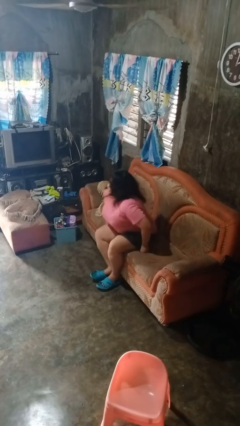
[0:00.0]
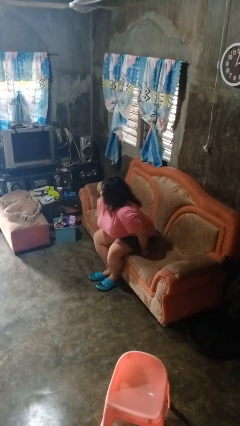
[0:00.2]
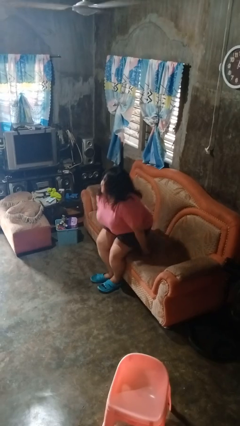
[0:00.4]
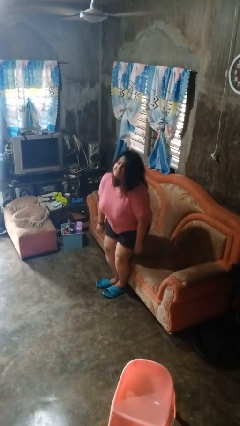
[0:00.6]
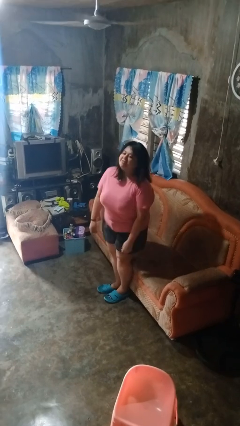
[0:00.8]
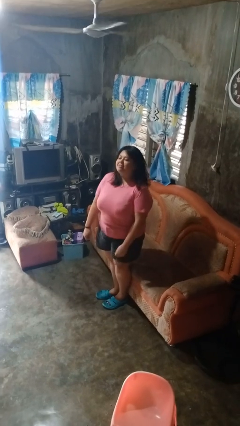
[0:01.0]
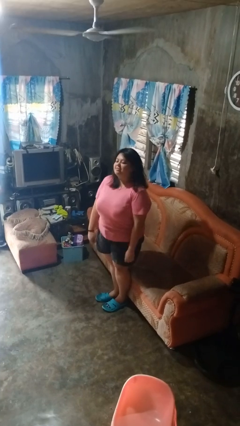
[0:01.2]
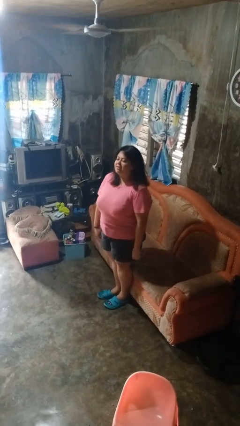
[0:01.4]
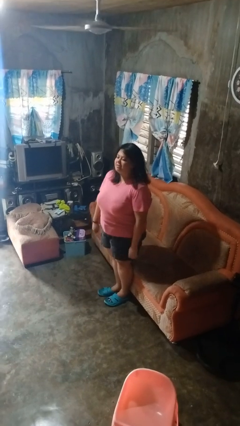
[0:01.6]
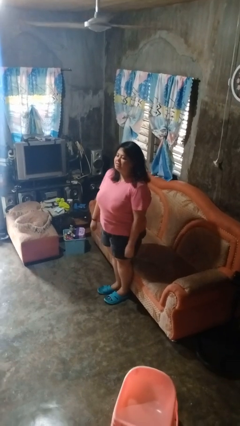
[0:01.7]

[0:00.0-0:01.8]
person stands up

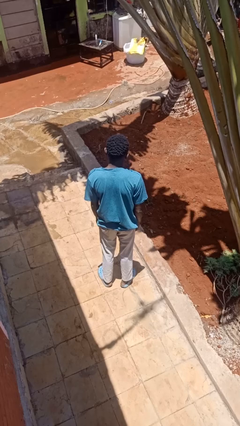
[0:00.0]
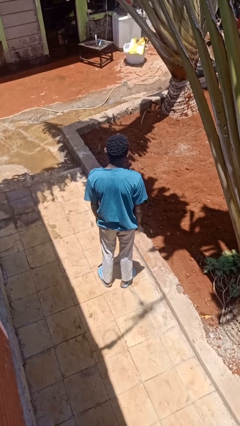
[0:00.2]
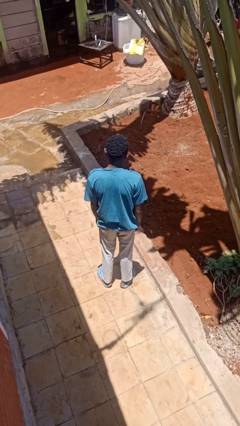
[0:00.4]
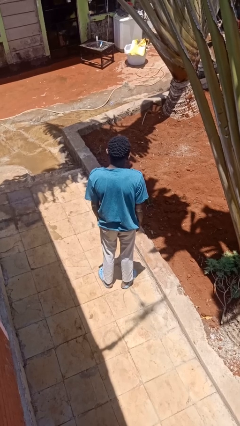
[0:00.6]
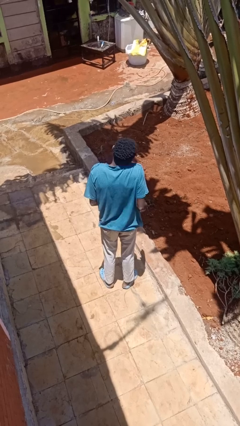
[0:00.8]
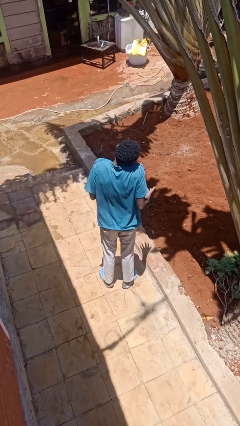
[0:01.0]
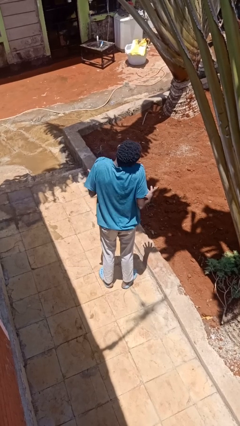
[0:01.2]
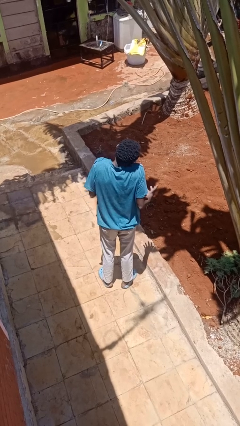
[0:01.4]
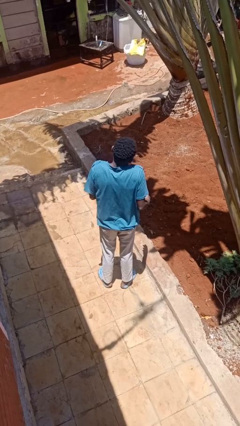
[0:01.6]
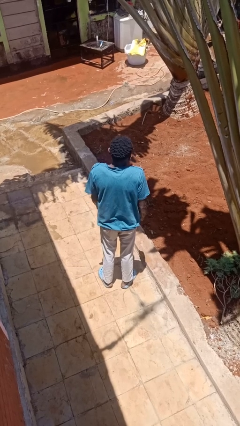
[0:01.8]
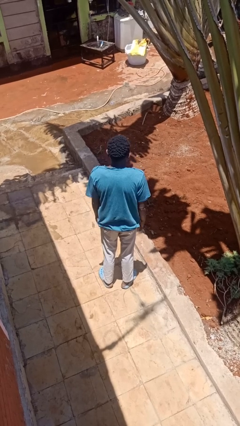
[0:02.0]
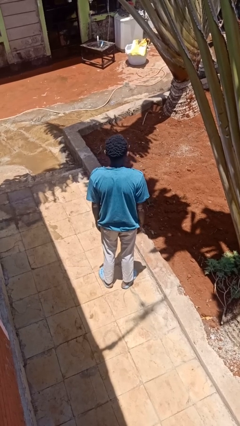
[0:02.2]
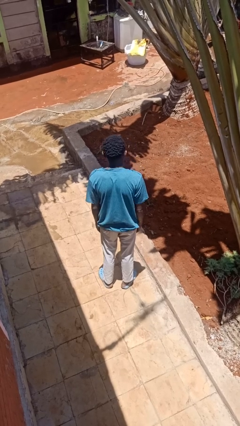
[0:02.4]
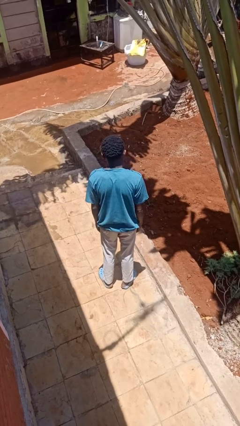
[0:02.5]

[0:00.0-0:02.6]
person shrugs

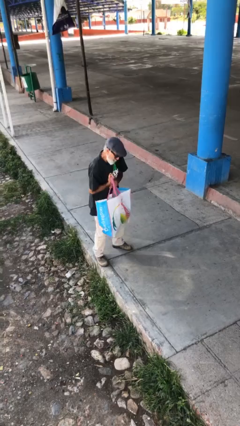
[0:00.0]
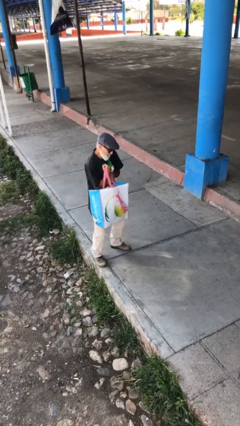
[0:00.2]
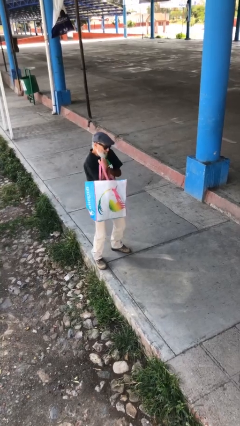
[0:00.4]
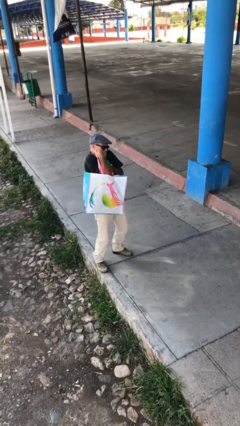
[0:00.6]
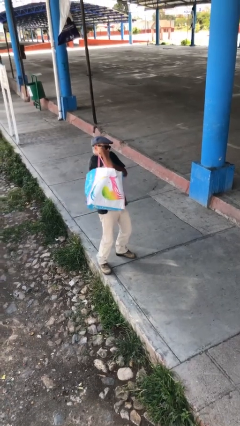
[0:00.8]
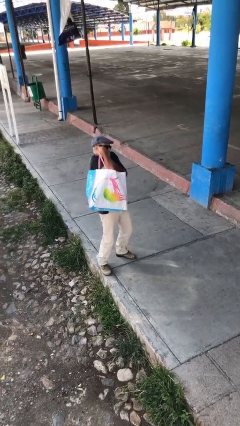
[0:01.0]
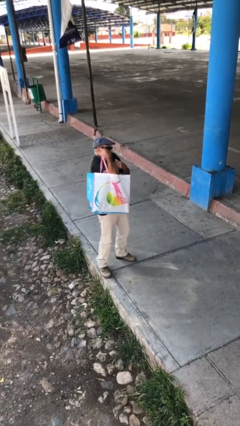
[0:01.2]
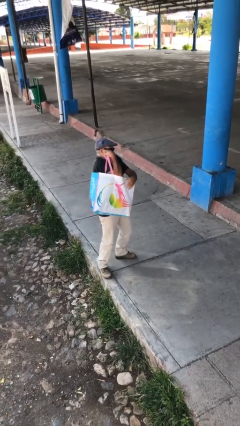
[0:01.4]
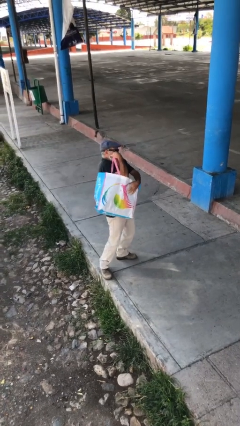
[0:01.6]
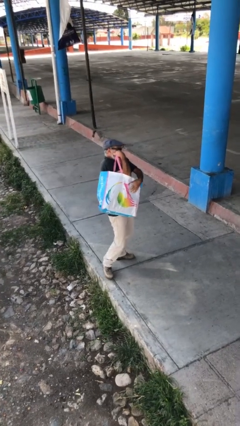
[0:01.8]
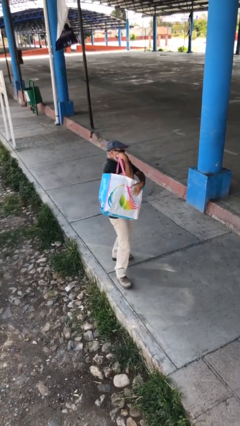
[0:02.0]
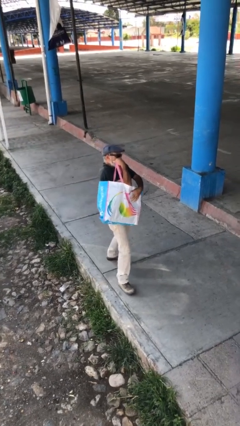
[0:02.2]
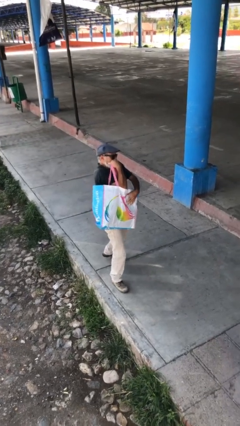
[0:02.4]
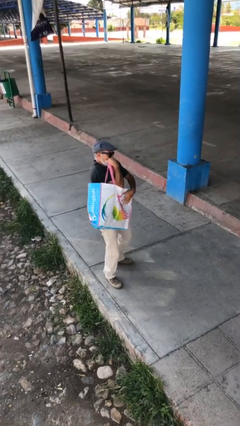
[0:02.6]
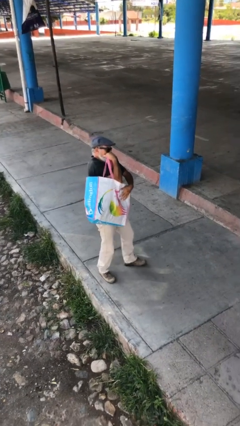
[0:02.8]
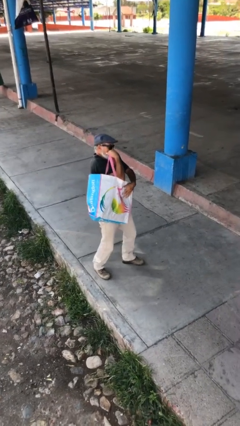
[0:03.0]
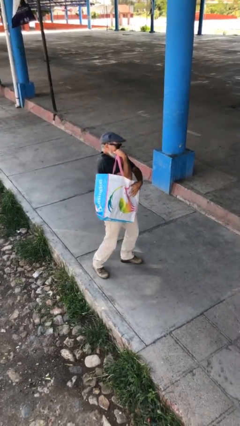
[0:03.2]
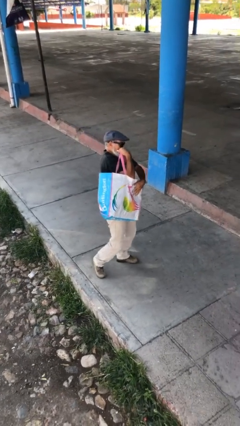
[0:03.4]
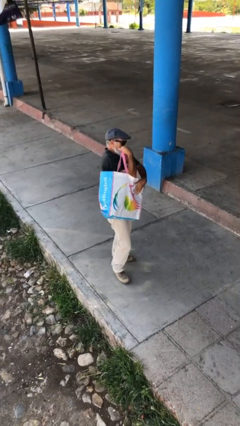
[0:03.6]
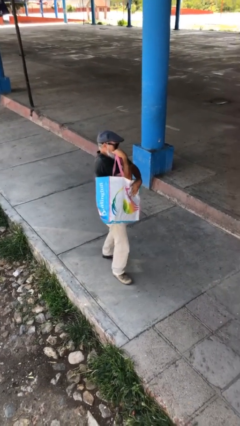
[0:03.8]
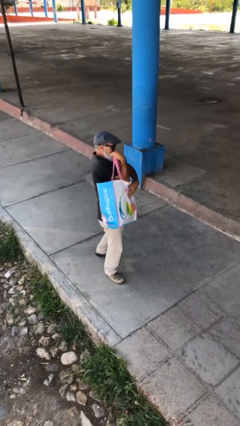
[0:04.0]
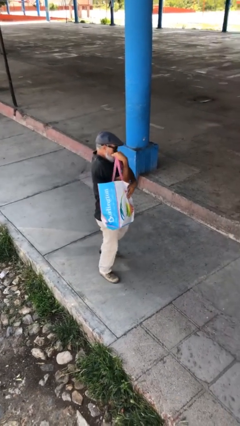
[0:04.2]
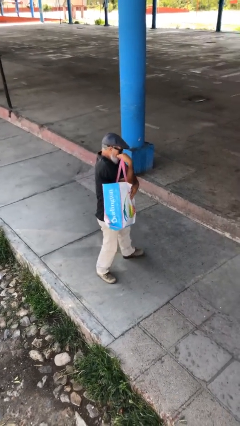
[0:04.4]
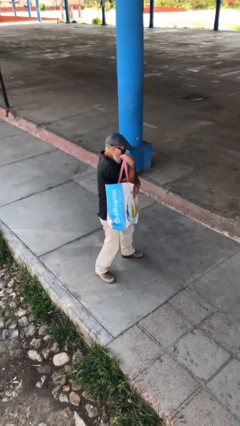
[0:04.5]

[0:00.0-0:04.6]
person carries heavy object

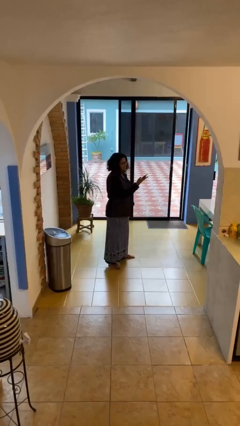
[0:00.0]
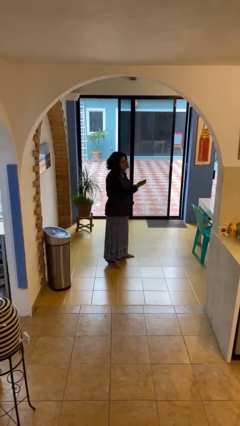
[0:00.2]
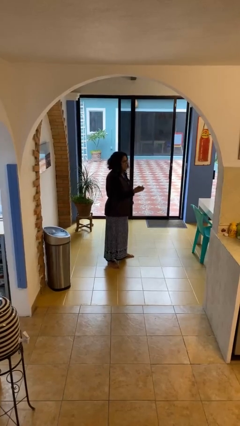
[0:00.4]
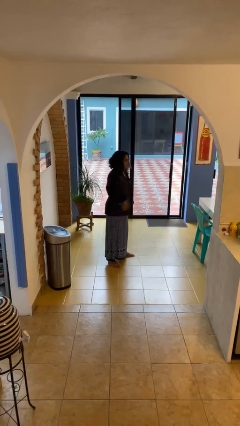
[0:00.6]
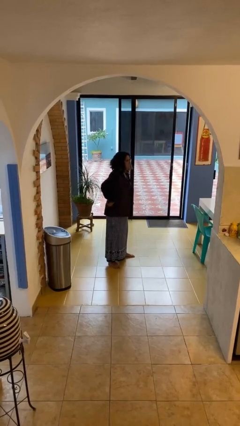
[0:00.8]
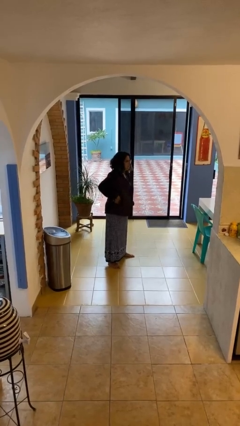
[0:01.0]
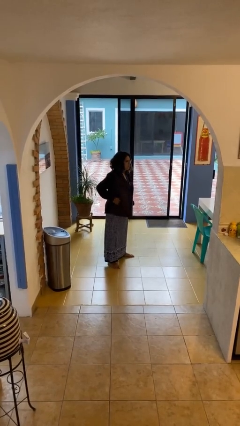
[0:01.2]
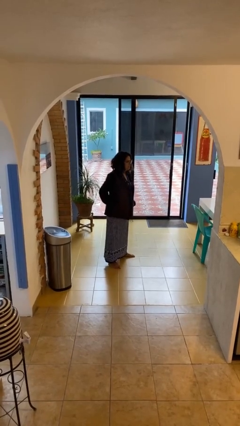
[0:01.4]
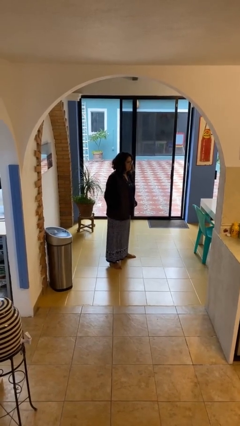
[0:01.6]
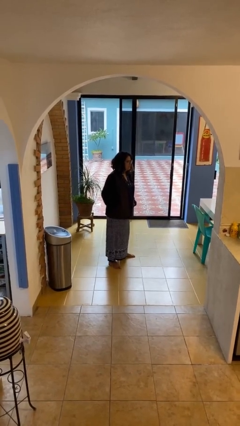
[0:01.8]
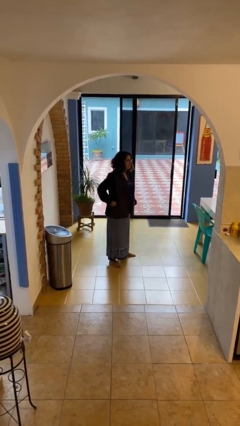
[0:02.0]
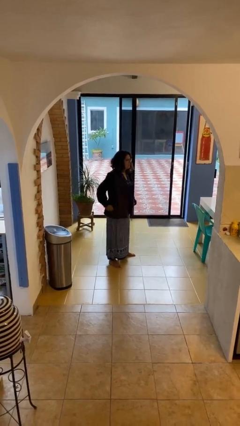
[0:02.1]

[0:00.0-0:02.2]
person puts phone into pocket

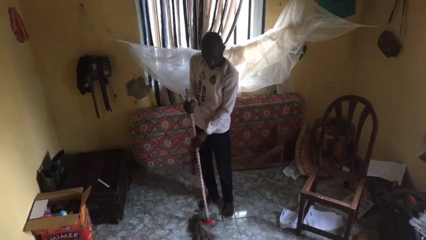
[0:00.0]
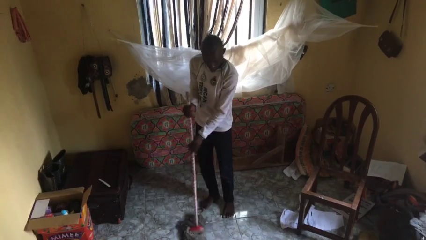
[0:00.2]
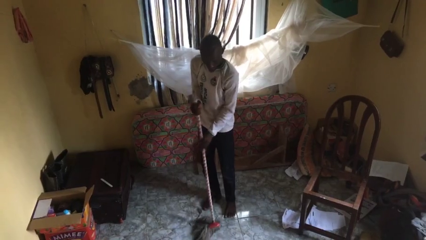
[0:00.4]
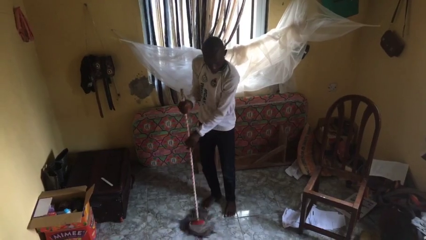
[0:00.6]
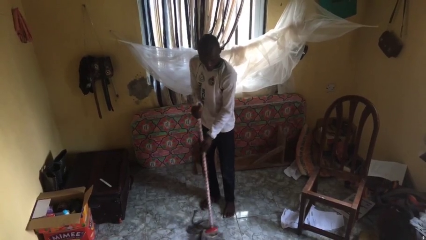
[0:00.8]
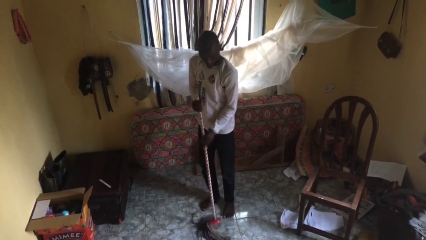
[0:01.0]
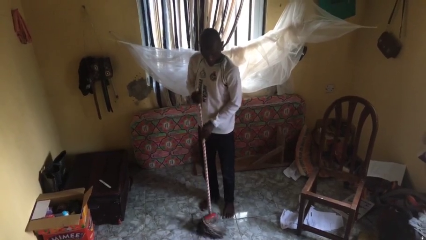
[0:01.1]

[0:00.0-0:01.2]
person mops

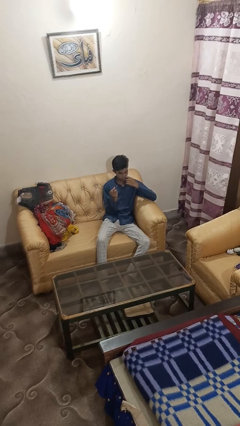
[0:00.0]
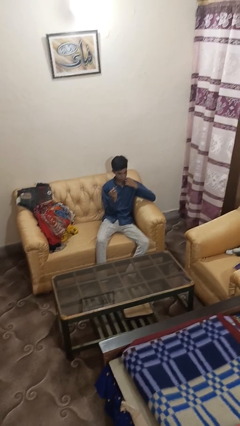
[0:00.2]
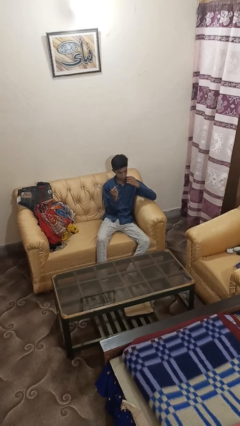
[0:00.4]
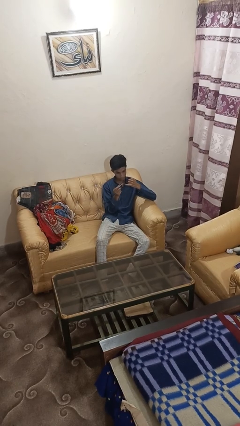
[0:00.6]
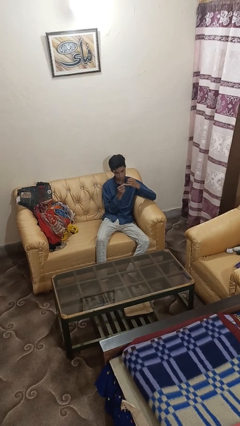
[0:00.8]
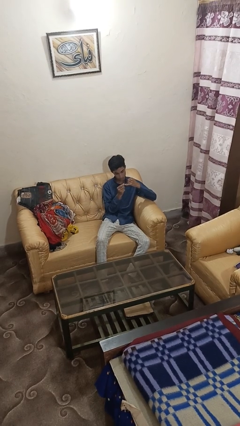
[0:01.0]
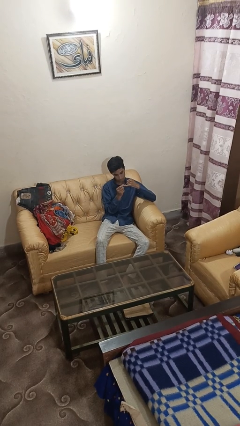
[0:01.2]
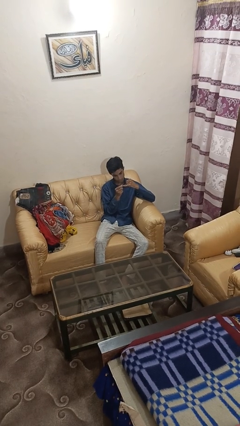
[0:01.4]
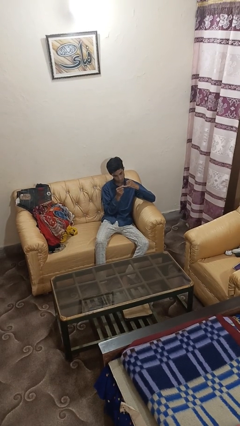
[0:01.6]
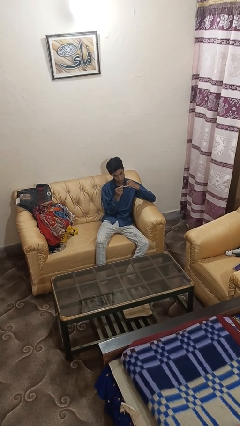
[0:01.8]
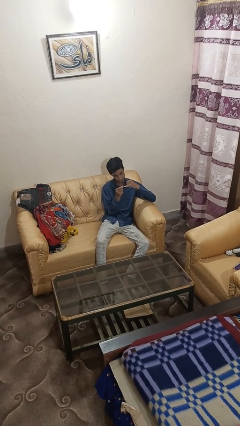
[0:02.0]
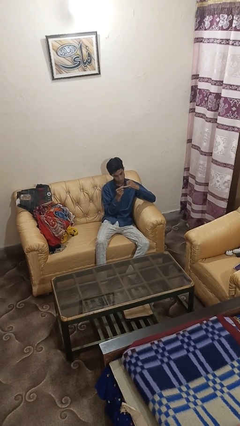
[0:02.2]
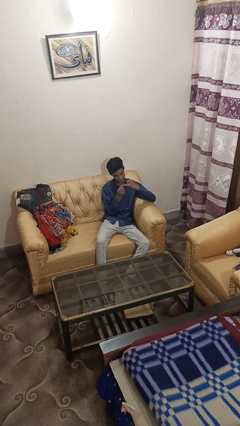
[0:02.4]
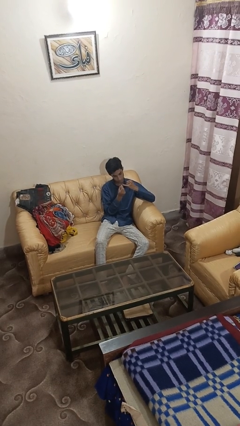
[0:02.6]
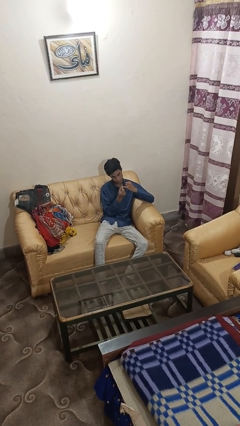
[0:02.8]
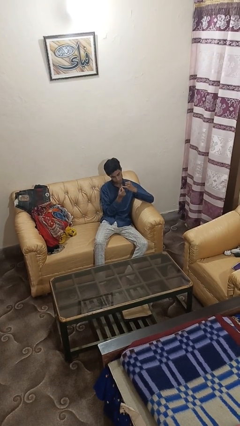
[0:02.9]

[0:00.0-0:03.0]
person files fingernails

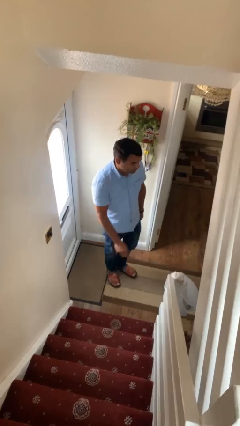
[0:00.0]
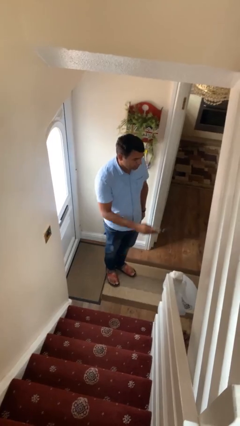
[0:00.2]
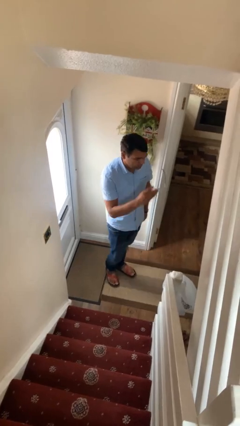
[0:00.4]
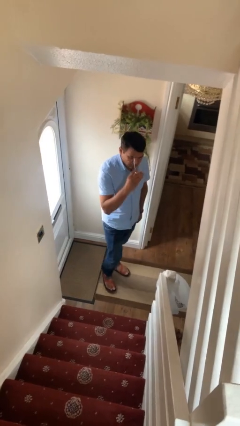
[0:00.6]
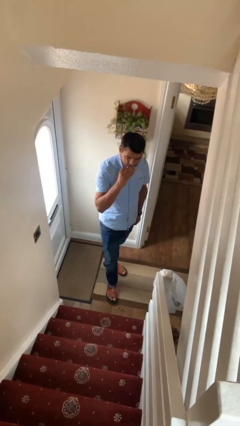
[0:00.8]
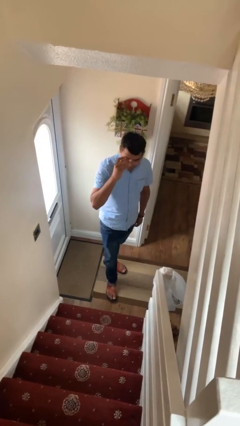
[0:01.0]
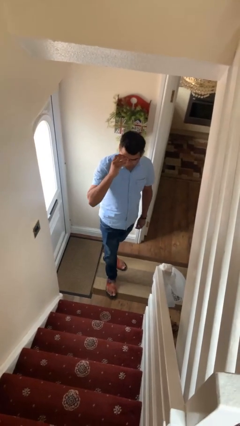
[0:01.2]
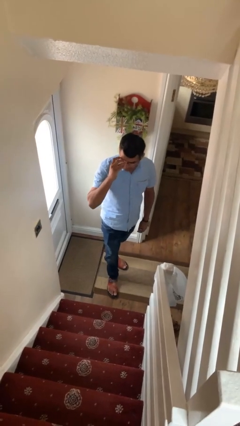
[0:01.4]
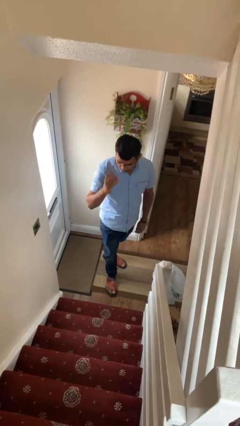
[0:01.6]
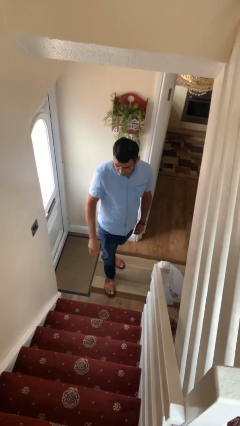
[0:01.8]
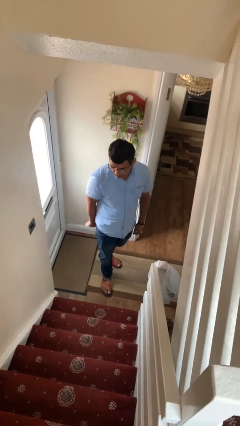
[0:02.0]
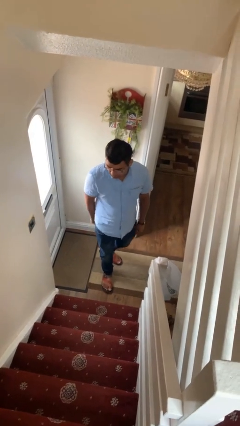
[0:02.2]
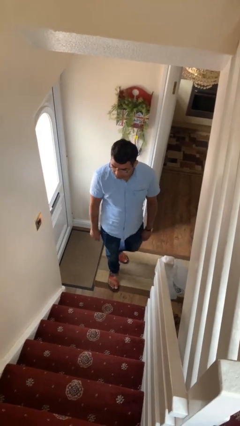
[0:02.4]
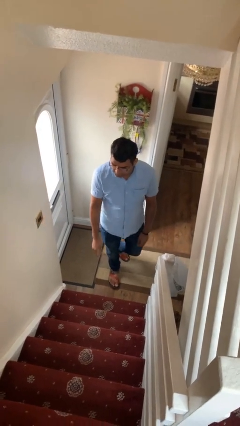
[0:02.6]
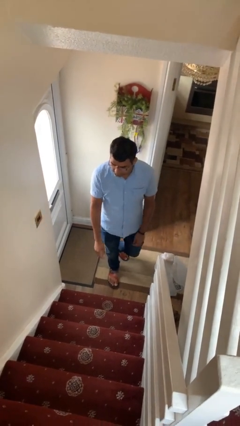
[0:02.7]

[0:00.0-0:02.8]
person puts on glasses
